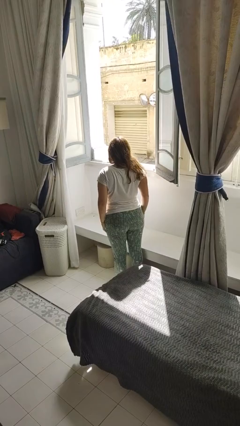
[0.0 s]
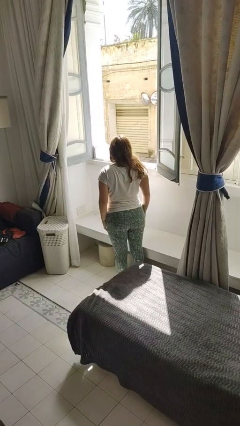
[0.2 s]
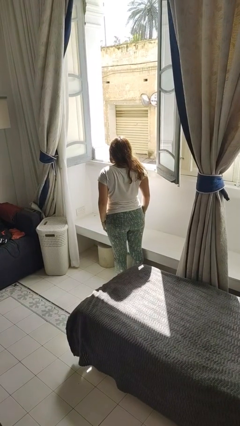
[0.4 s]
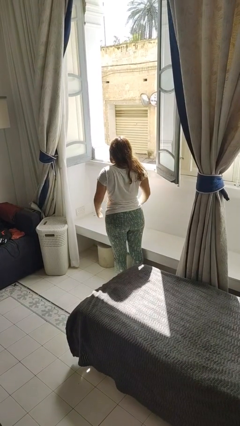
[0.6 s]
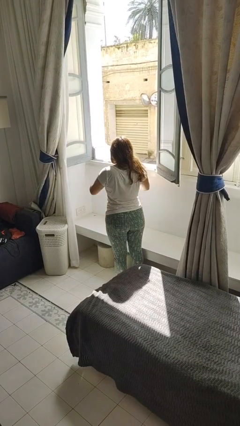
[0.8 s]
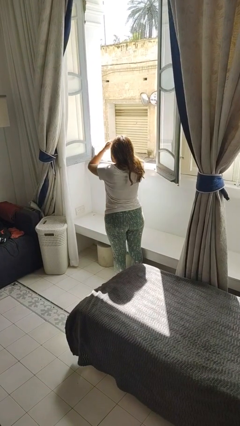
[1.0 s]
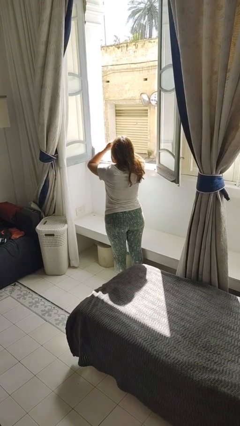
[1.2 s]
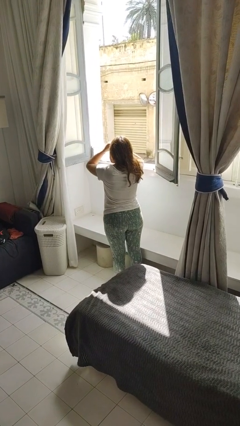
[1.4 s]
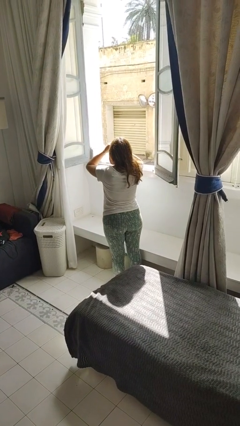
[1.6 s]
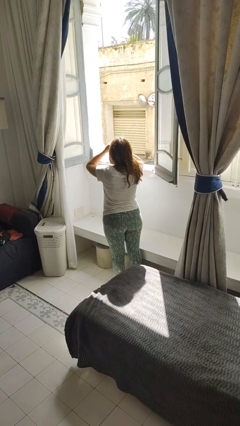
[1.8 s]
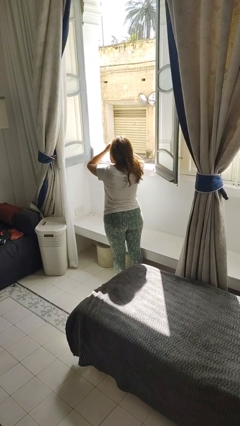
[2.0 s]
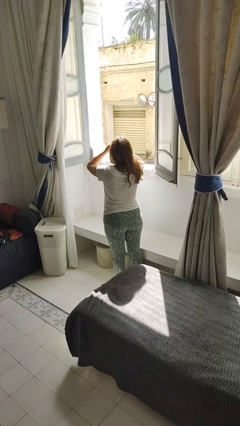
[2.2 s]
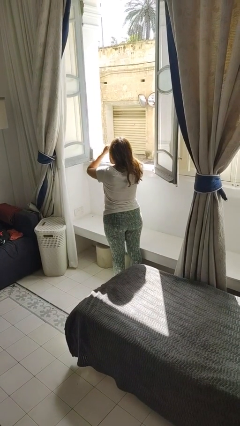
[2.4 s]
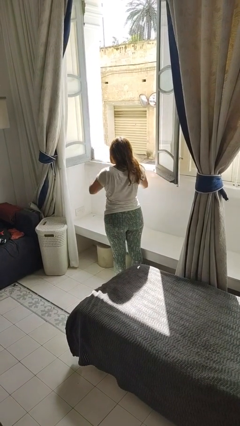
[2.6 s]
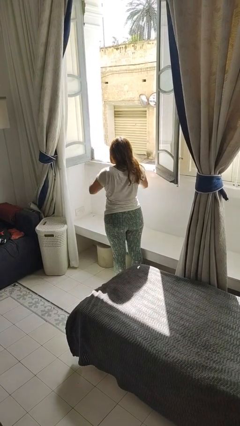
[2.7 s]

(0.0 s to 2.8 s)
person shades eyes

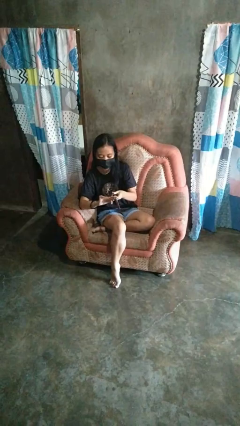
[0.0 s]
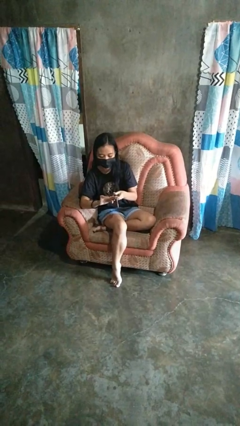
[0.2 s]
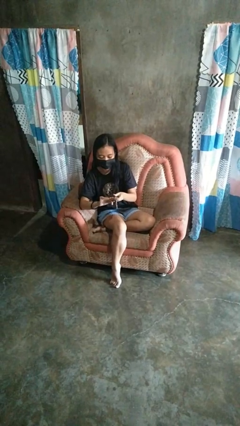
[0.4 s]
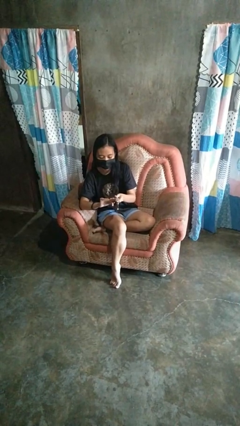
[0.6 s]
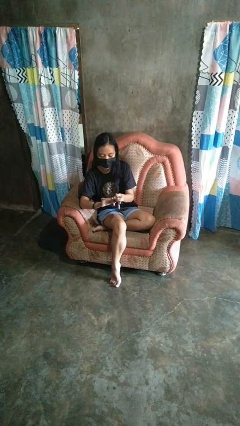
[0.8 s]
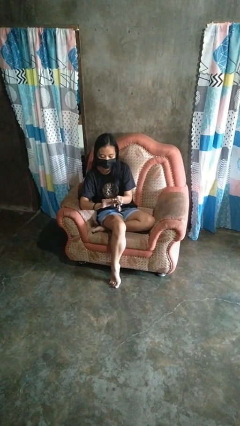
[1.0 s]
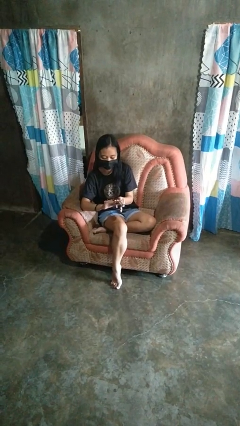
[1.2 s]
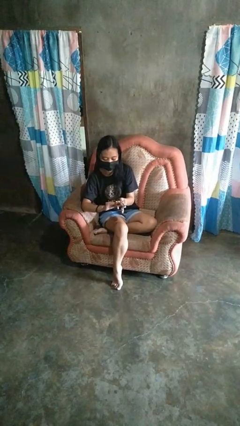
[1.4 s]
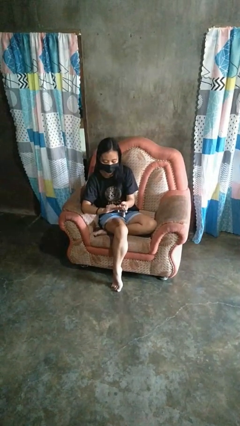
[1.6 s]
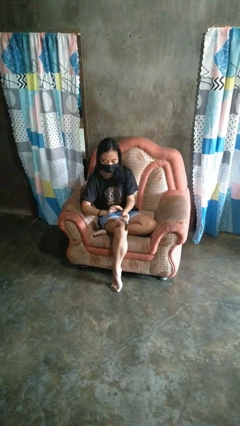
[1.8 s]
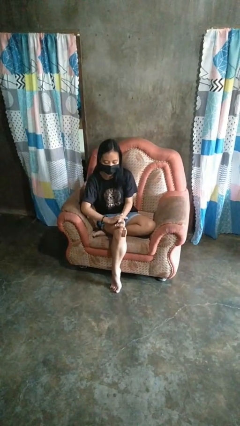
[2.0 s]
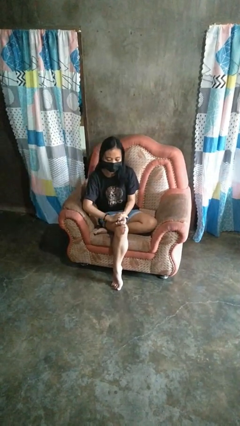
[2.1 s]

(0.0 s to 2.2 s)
person clips fingernails

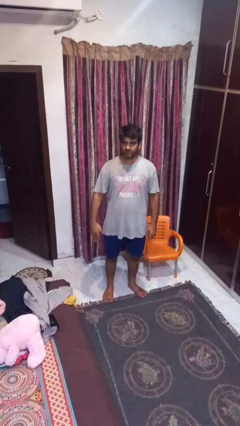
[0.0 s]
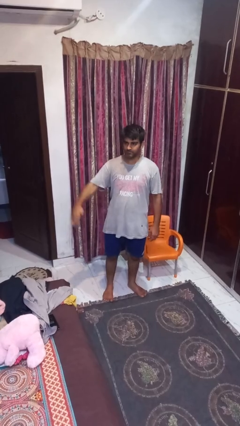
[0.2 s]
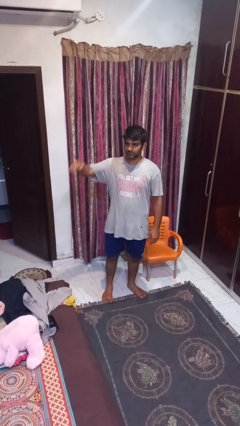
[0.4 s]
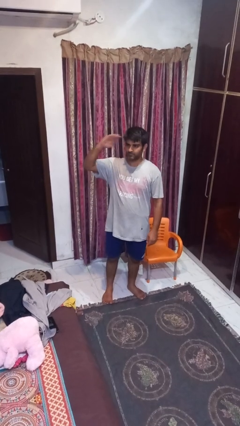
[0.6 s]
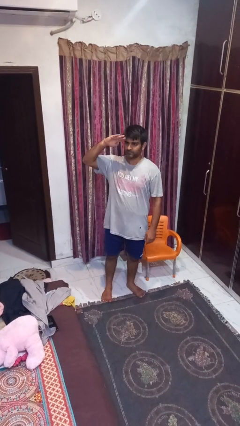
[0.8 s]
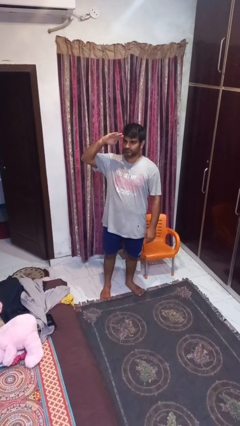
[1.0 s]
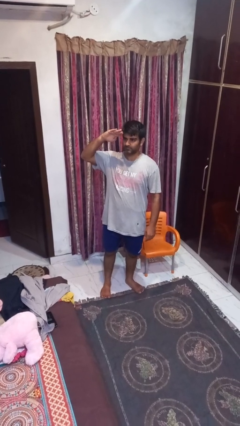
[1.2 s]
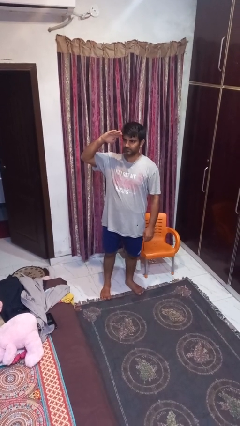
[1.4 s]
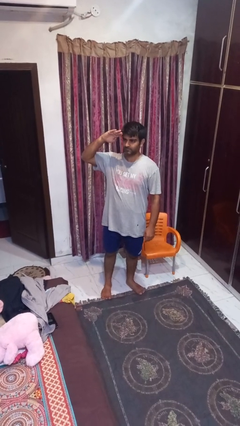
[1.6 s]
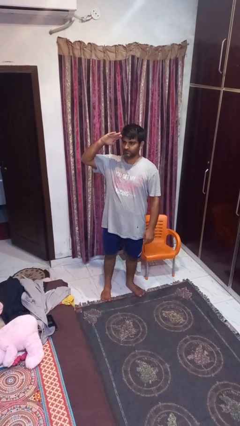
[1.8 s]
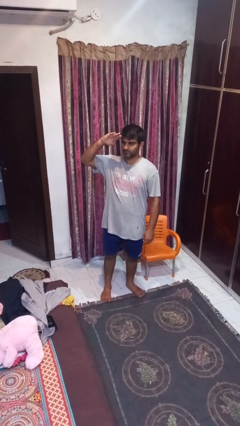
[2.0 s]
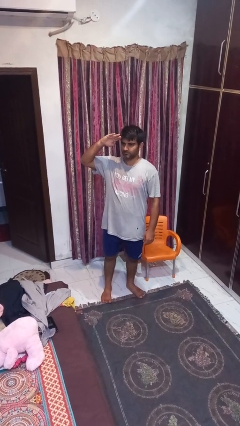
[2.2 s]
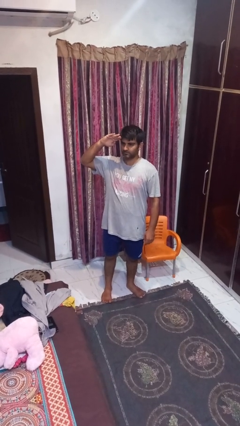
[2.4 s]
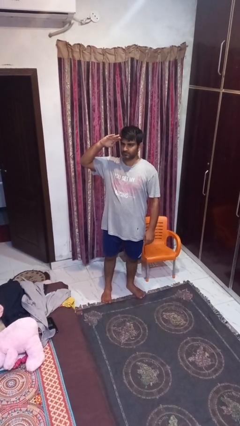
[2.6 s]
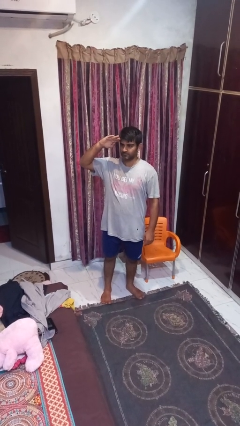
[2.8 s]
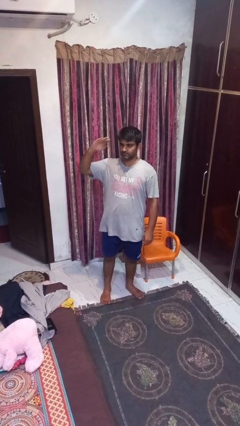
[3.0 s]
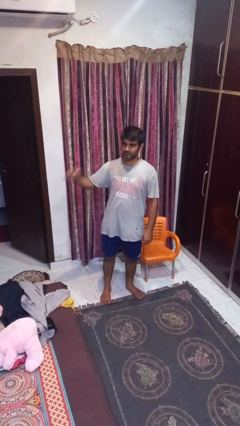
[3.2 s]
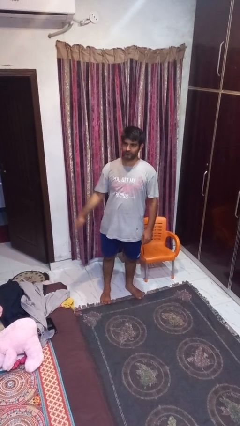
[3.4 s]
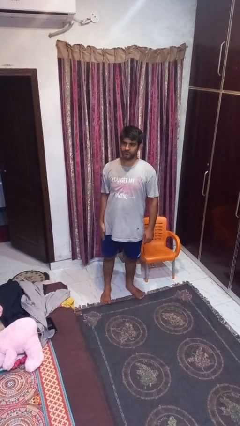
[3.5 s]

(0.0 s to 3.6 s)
person salutes

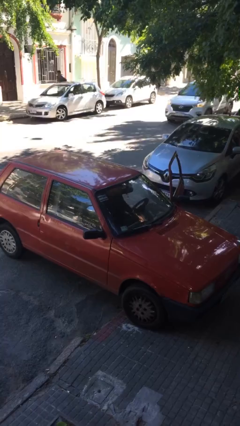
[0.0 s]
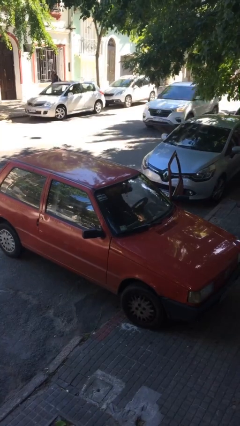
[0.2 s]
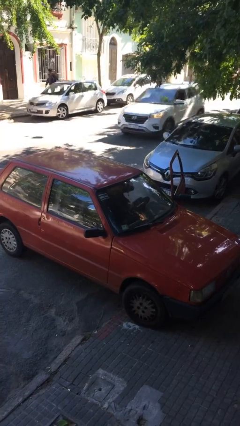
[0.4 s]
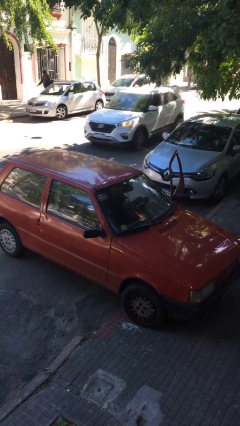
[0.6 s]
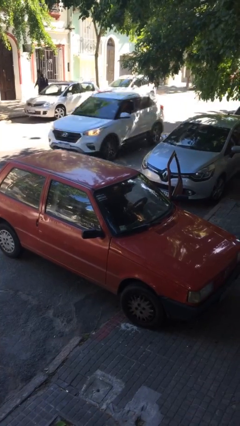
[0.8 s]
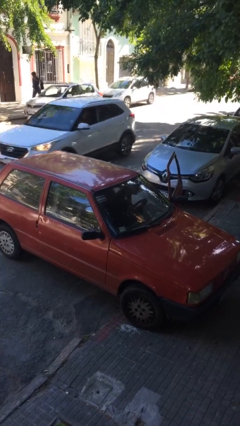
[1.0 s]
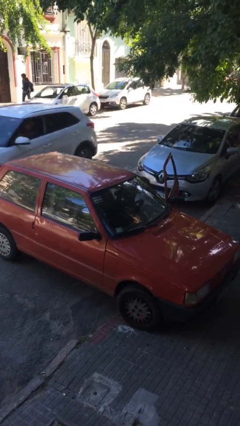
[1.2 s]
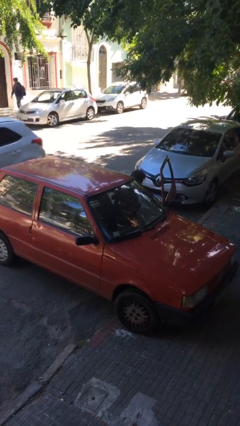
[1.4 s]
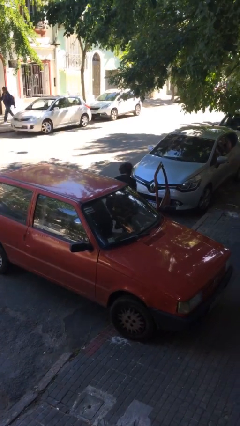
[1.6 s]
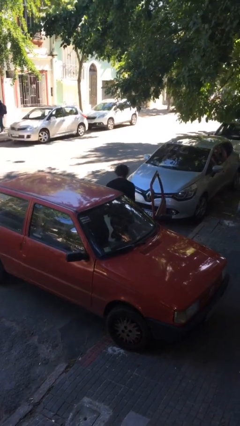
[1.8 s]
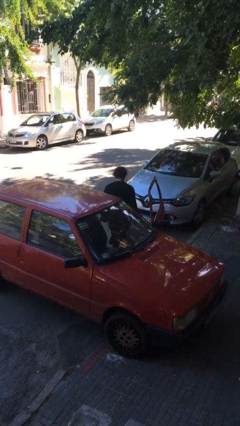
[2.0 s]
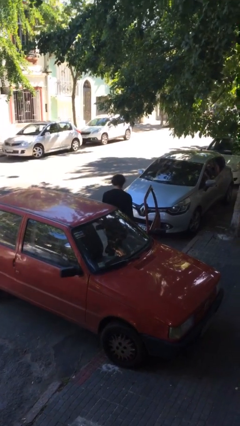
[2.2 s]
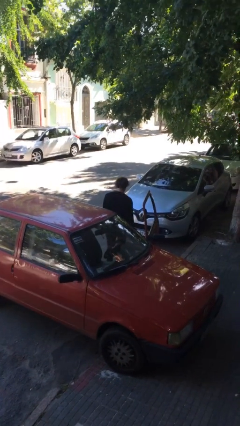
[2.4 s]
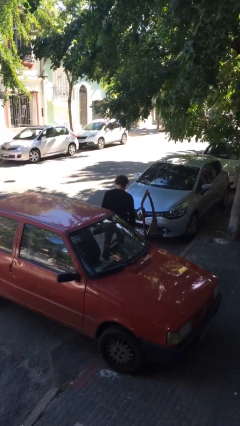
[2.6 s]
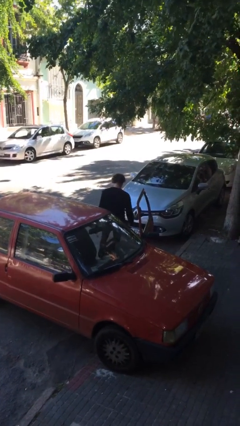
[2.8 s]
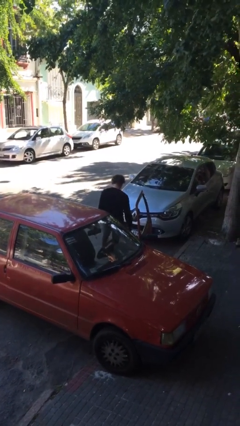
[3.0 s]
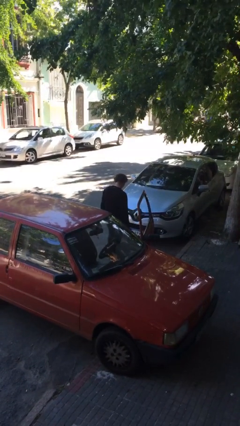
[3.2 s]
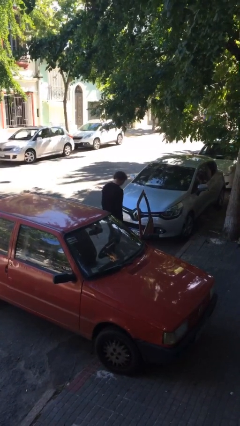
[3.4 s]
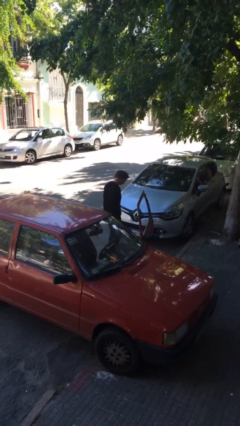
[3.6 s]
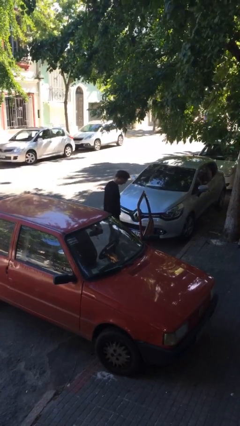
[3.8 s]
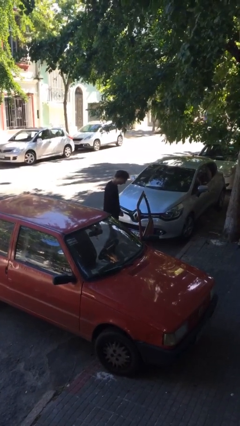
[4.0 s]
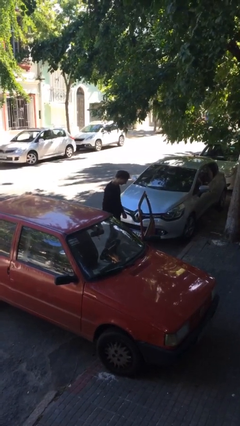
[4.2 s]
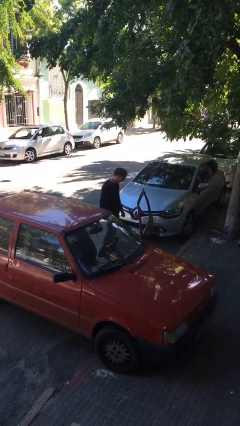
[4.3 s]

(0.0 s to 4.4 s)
person exits car

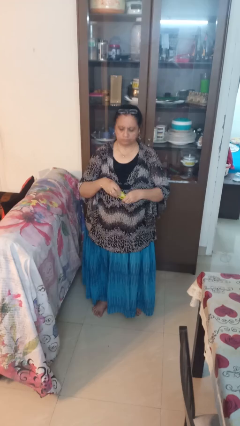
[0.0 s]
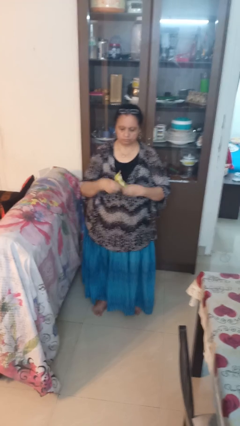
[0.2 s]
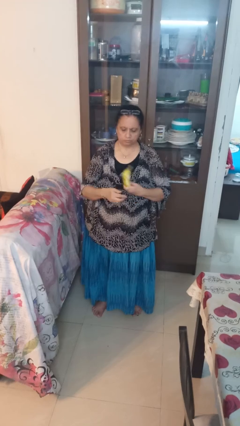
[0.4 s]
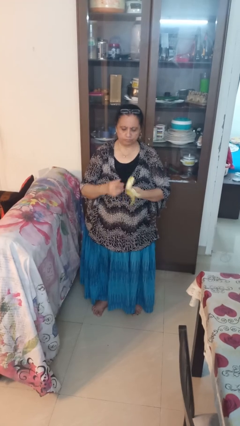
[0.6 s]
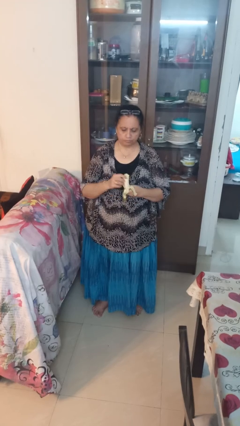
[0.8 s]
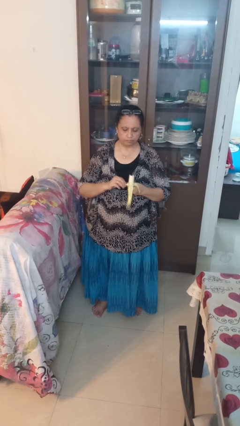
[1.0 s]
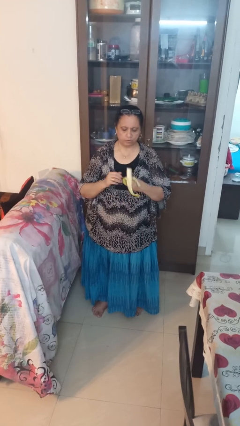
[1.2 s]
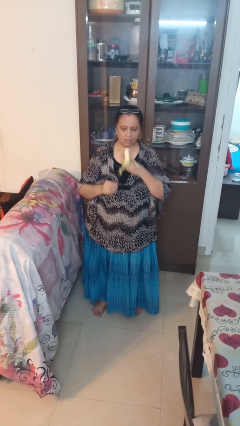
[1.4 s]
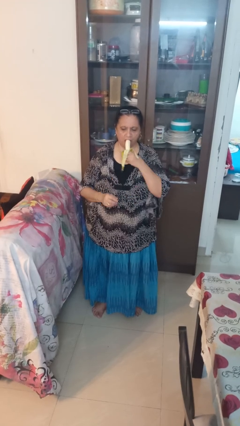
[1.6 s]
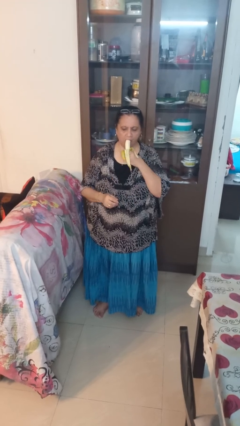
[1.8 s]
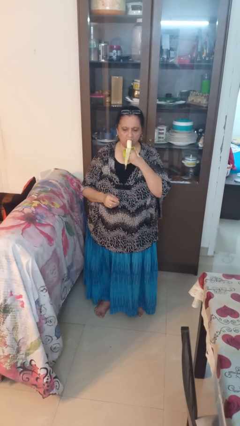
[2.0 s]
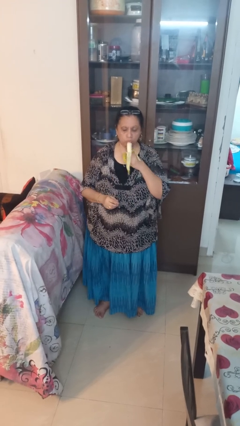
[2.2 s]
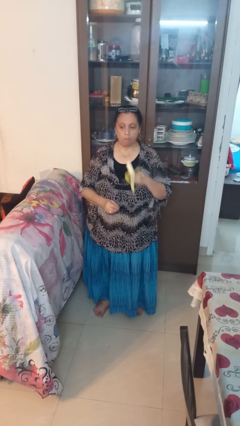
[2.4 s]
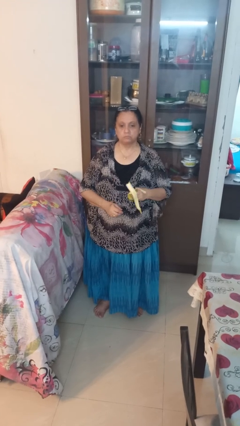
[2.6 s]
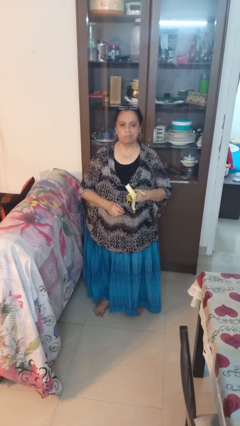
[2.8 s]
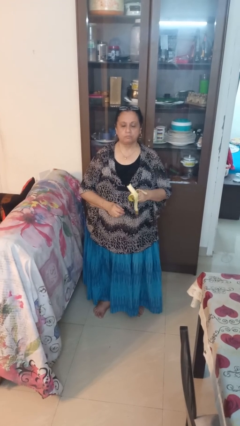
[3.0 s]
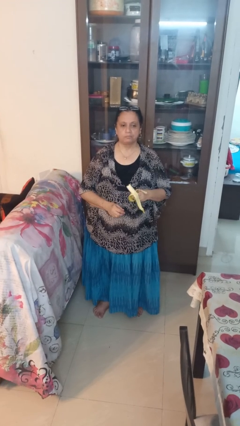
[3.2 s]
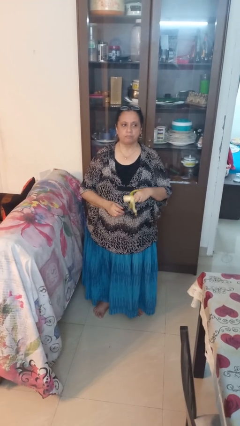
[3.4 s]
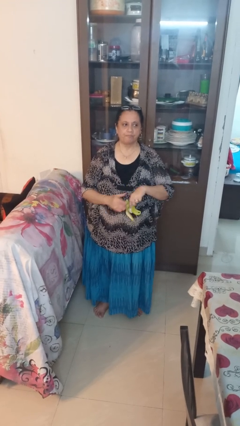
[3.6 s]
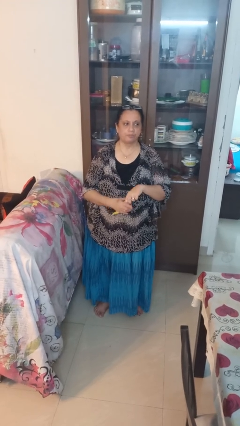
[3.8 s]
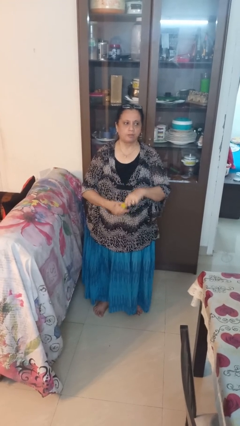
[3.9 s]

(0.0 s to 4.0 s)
person eats banana
